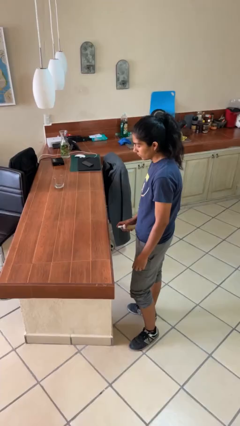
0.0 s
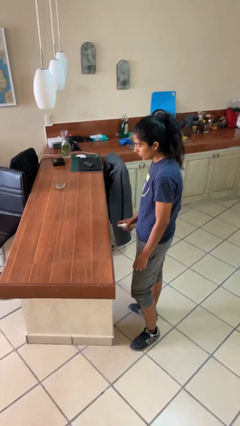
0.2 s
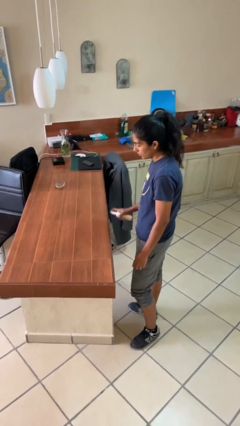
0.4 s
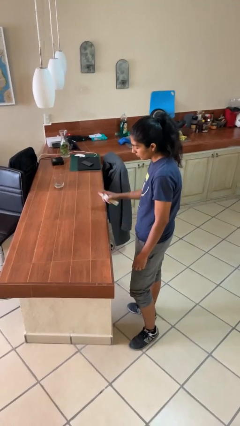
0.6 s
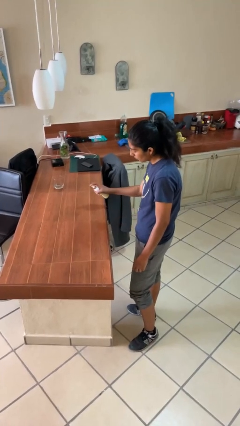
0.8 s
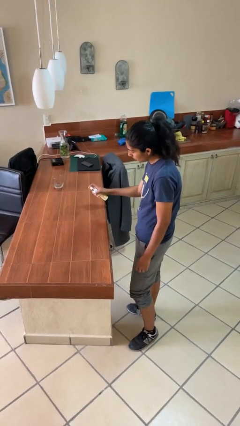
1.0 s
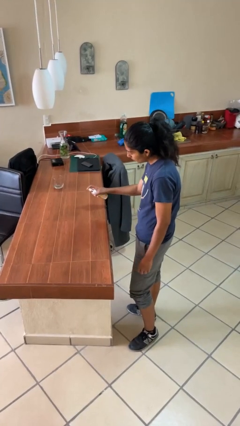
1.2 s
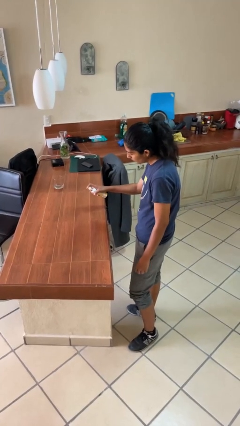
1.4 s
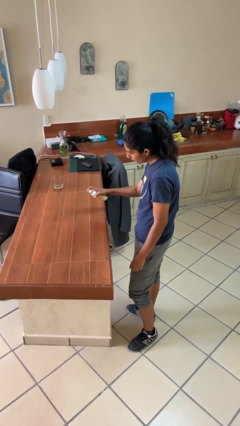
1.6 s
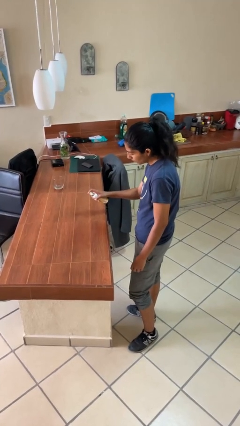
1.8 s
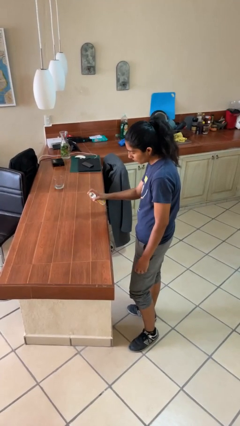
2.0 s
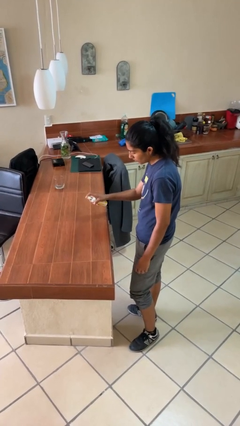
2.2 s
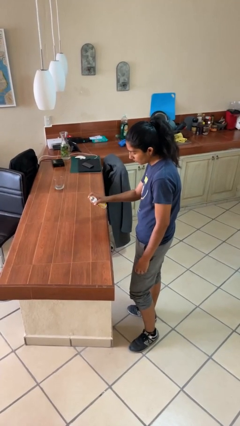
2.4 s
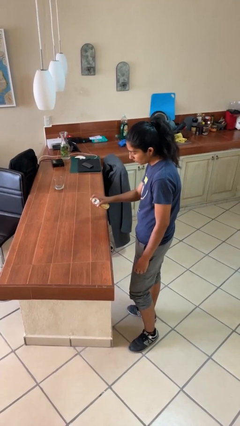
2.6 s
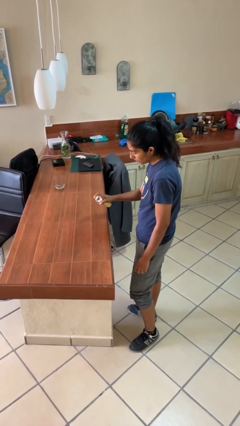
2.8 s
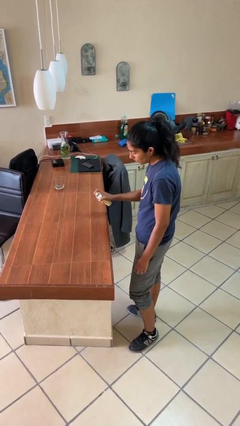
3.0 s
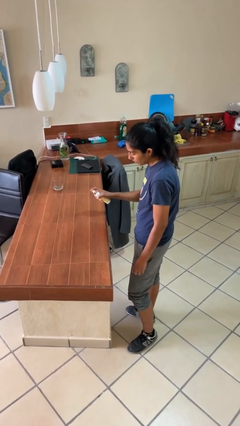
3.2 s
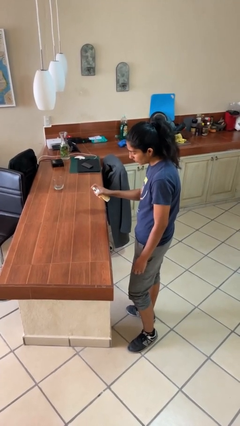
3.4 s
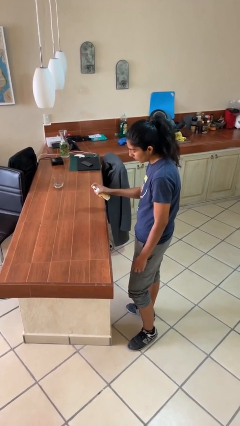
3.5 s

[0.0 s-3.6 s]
person sprays from bottle

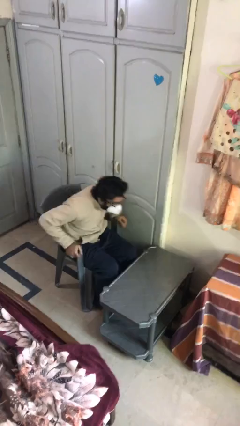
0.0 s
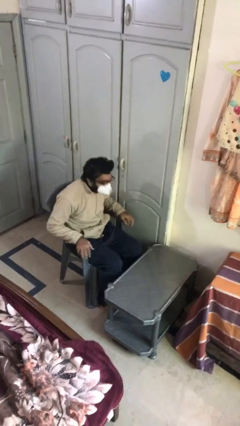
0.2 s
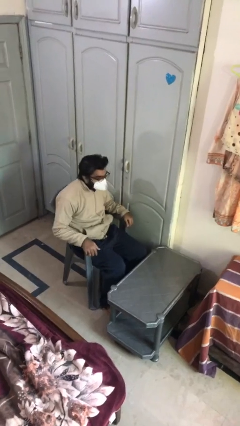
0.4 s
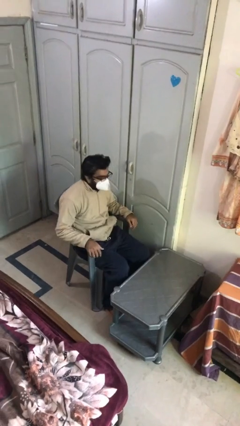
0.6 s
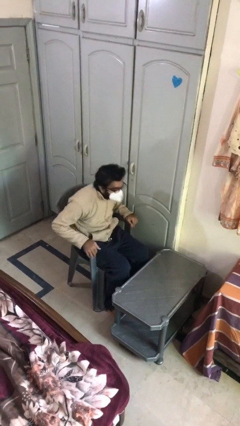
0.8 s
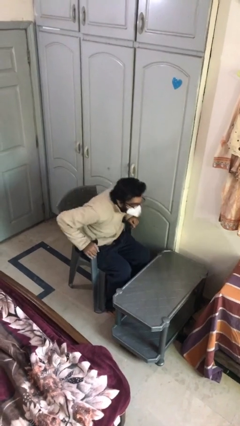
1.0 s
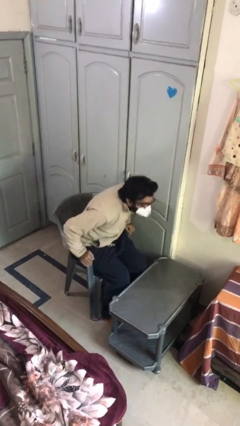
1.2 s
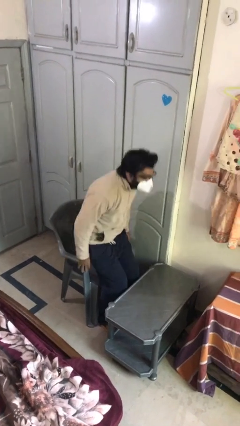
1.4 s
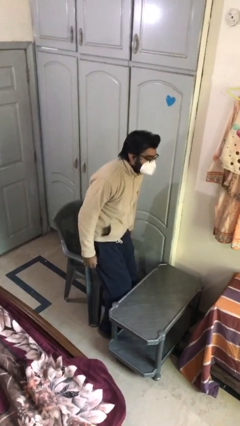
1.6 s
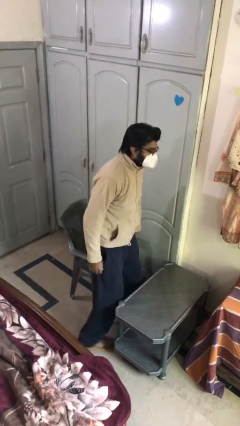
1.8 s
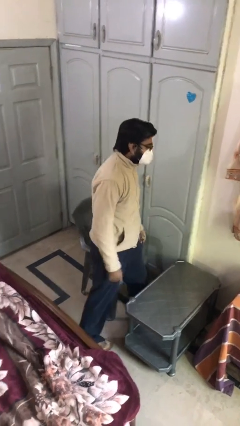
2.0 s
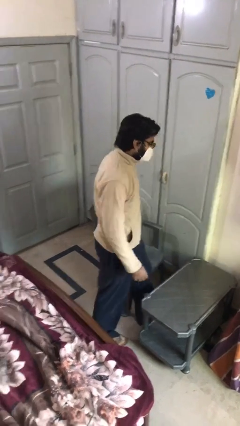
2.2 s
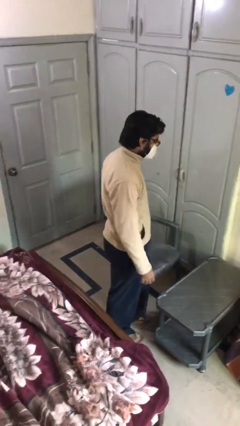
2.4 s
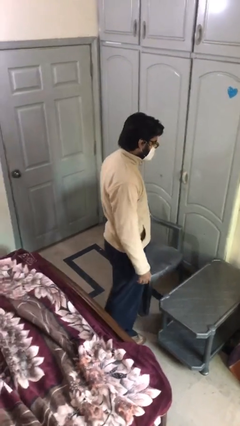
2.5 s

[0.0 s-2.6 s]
person stands up

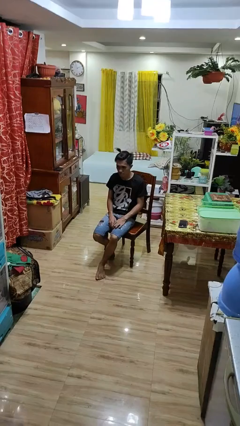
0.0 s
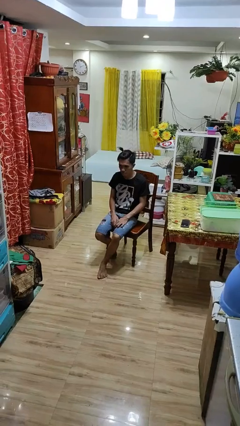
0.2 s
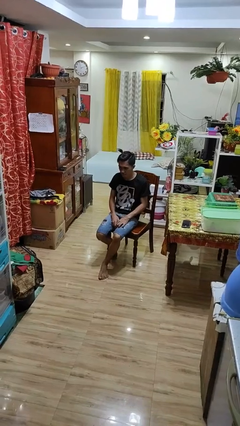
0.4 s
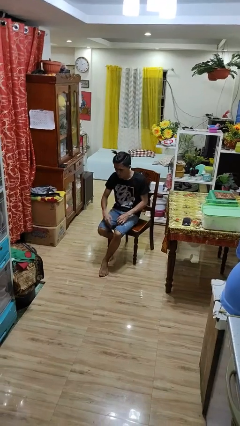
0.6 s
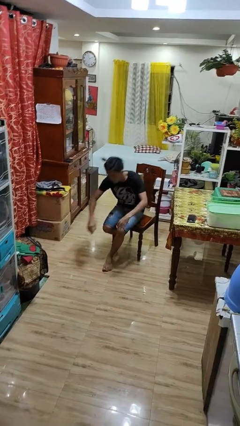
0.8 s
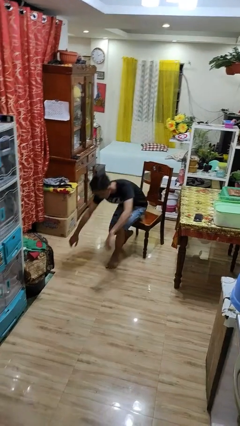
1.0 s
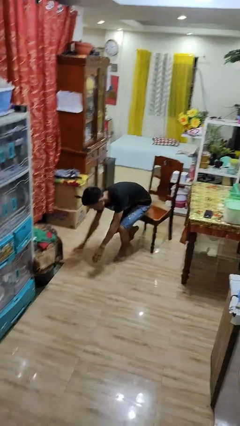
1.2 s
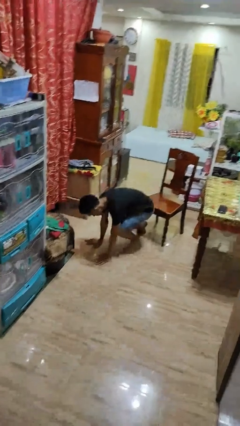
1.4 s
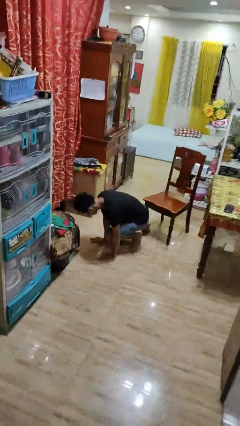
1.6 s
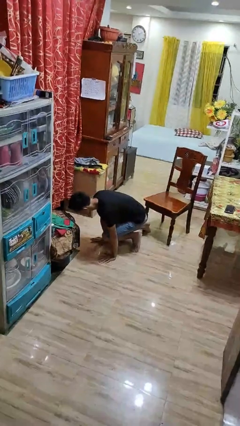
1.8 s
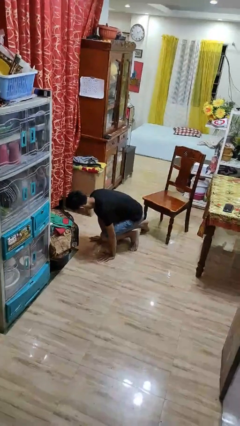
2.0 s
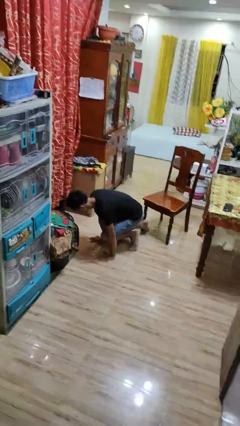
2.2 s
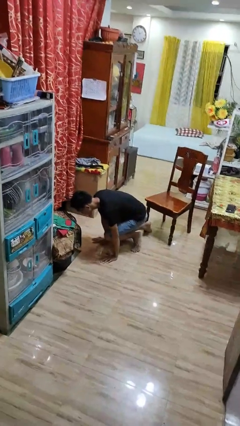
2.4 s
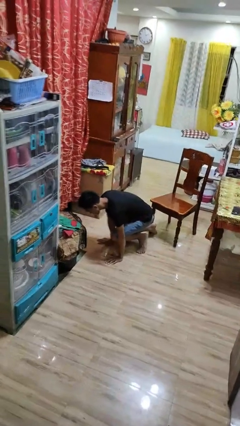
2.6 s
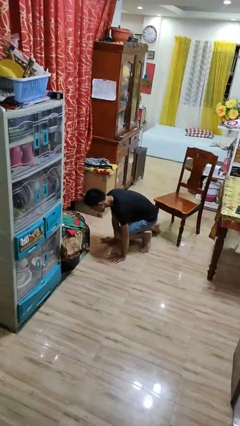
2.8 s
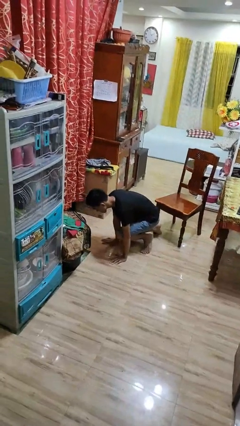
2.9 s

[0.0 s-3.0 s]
person falls from chair

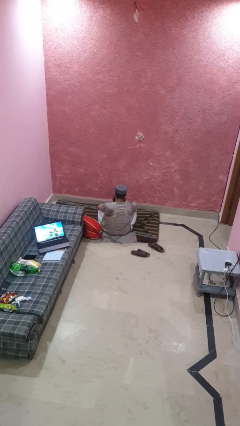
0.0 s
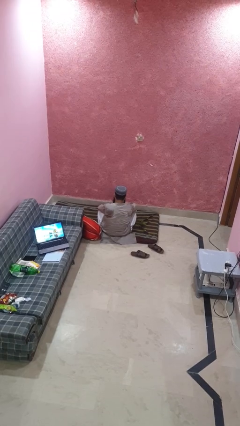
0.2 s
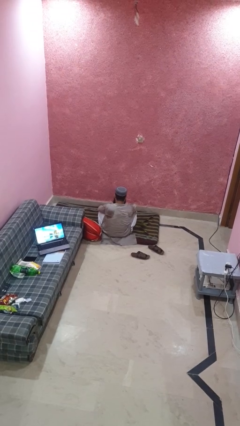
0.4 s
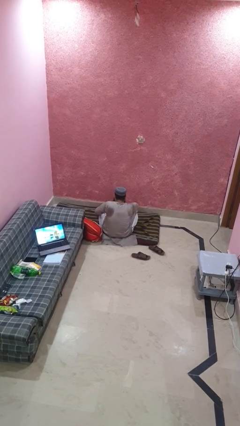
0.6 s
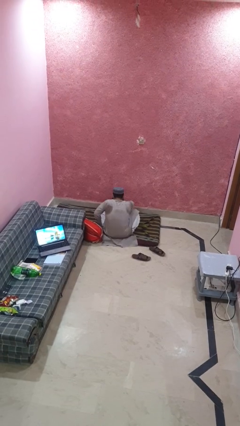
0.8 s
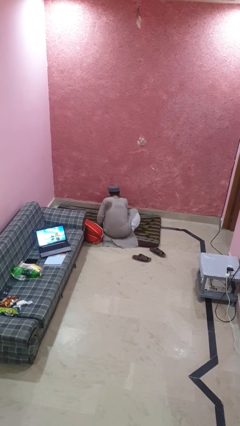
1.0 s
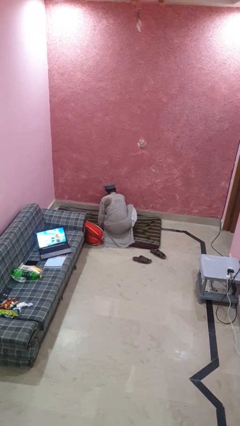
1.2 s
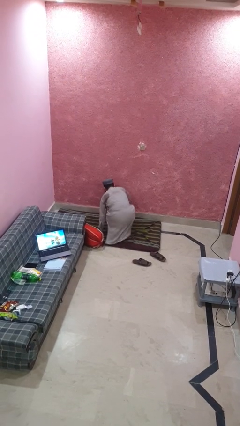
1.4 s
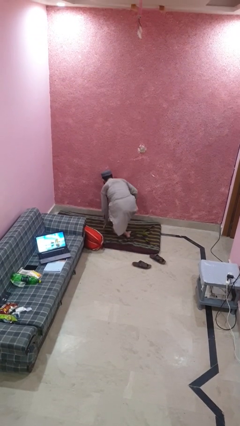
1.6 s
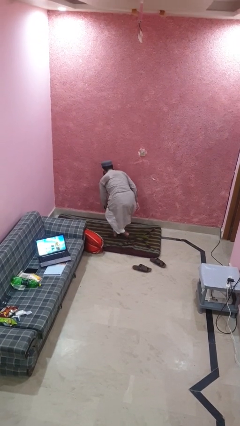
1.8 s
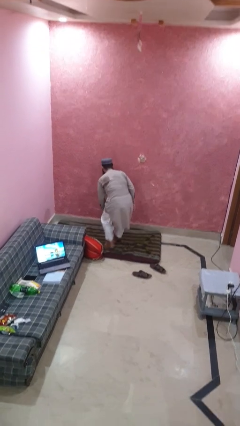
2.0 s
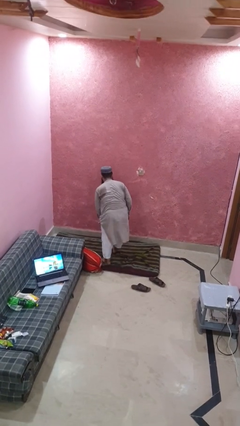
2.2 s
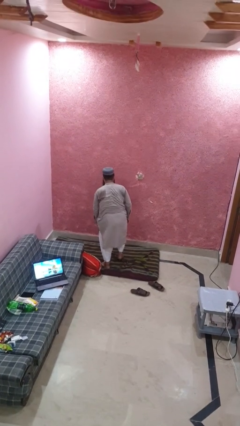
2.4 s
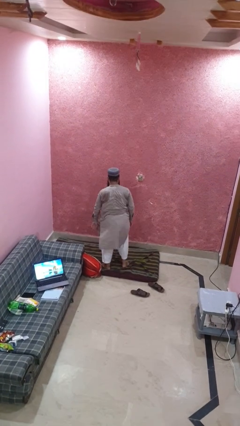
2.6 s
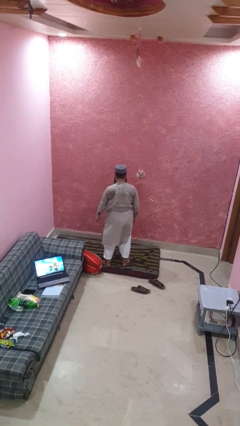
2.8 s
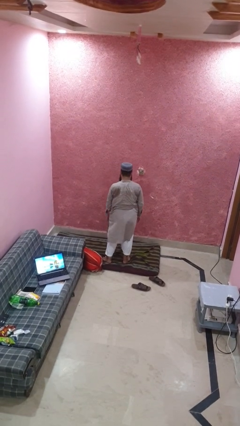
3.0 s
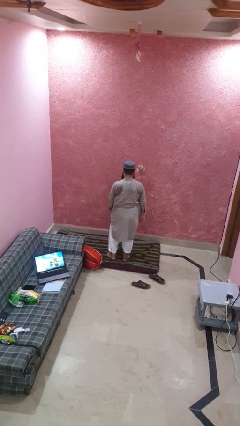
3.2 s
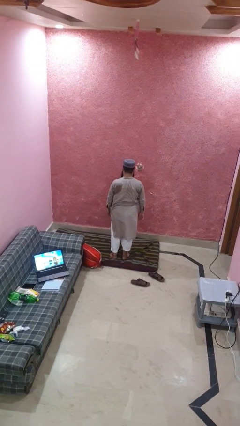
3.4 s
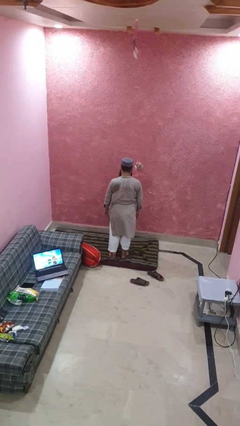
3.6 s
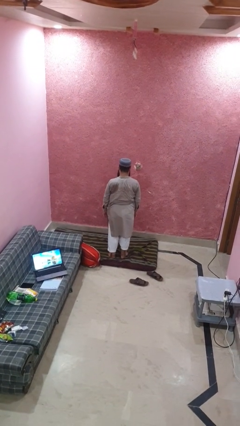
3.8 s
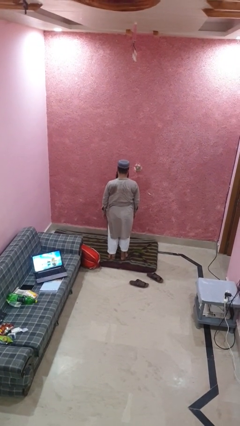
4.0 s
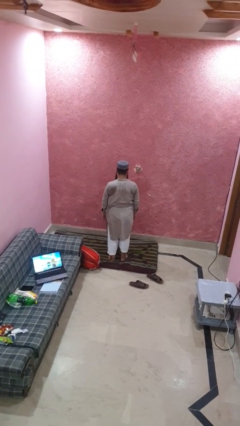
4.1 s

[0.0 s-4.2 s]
person stands up from floor

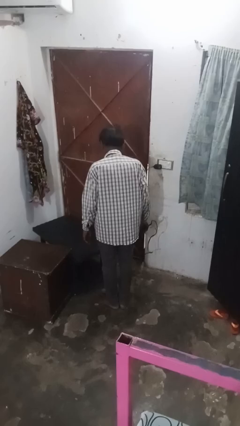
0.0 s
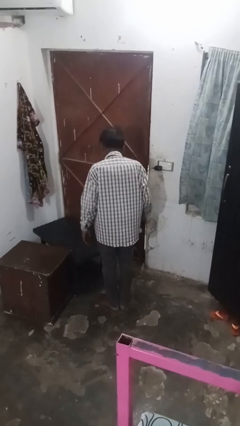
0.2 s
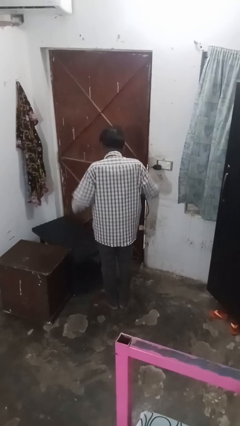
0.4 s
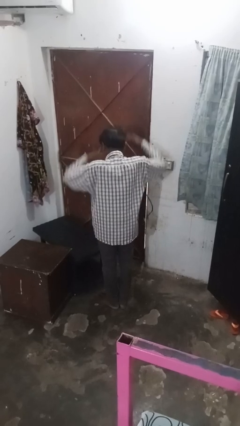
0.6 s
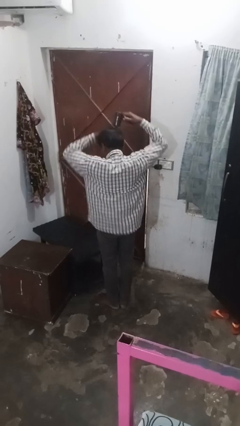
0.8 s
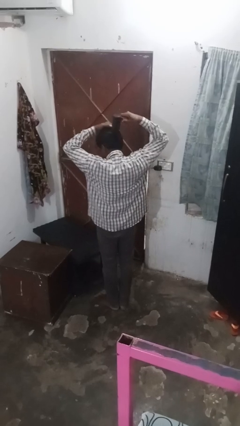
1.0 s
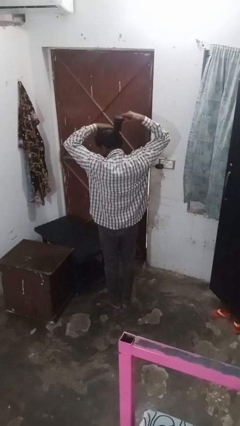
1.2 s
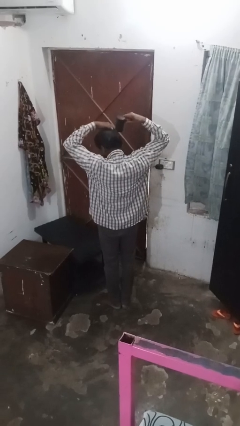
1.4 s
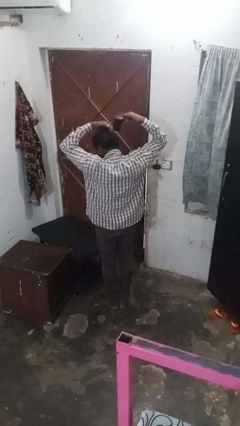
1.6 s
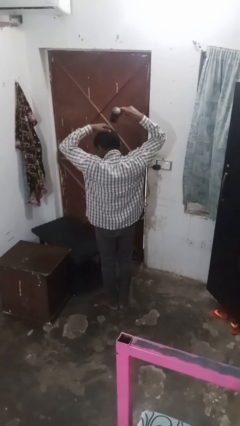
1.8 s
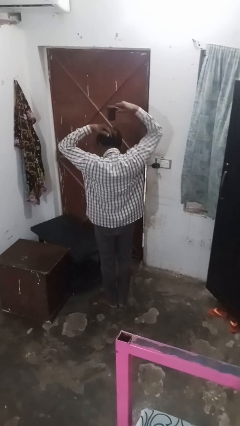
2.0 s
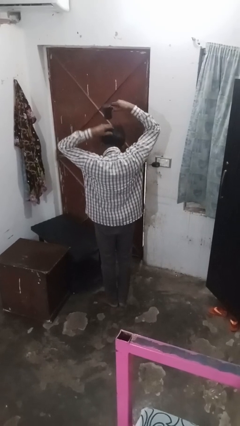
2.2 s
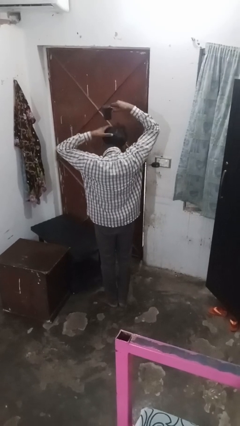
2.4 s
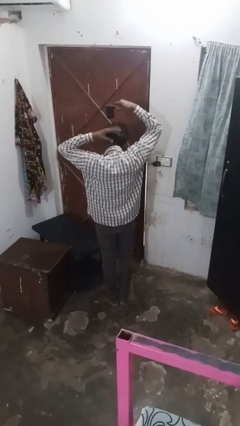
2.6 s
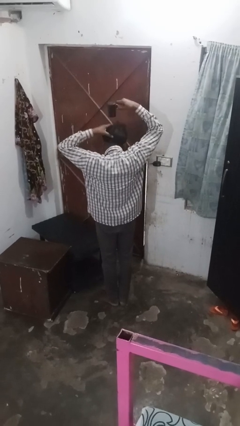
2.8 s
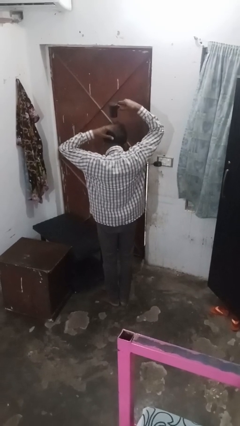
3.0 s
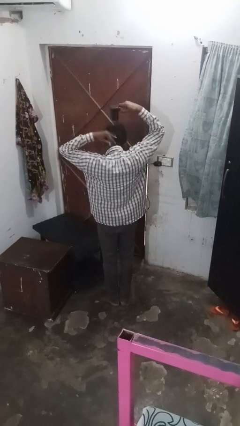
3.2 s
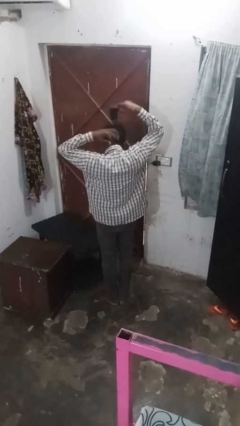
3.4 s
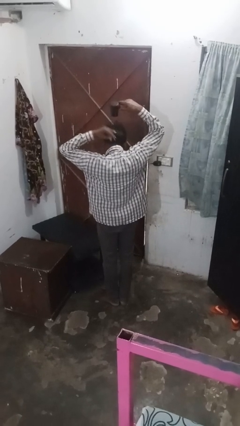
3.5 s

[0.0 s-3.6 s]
person dries hair with towel

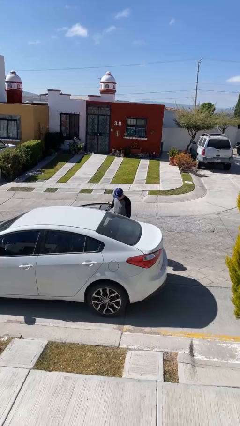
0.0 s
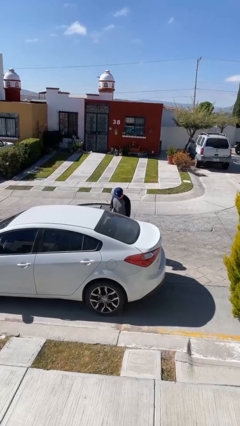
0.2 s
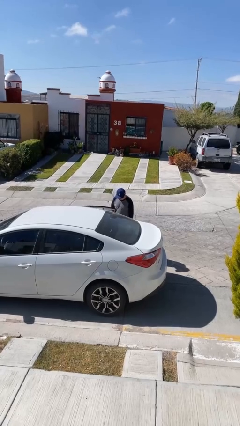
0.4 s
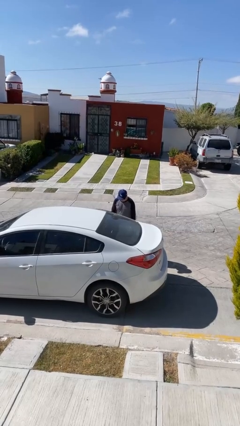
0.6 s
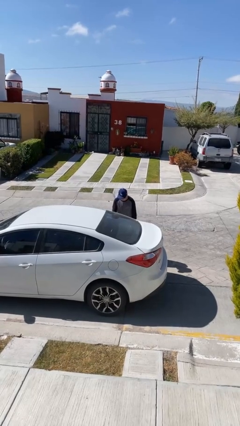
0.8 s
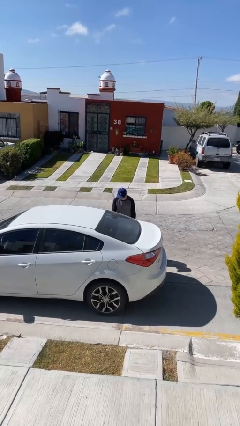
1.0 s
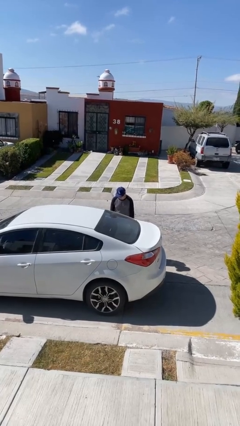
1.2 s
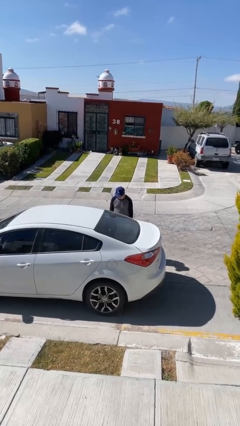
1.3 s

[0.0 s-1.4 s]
person closes car door
